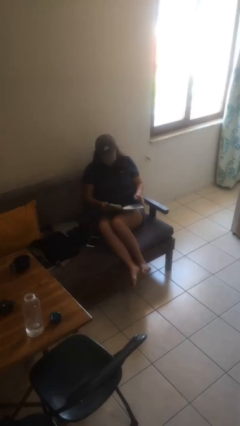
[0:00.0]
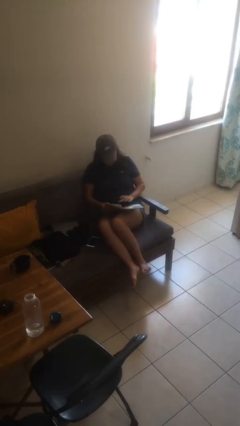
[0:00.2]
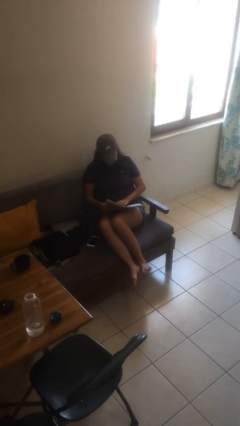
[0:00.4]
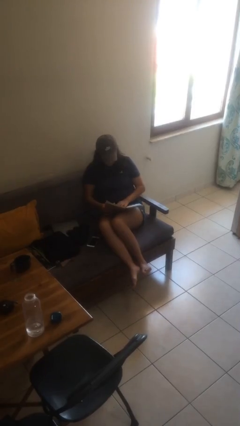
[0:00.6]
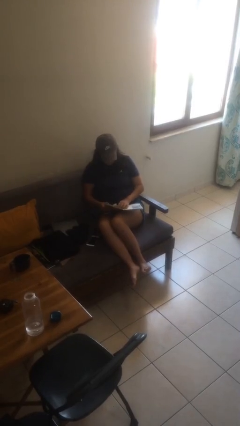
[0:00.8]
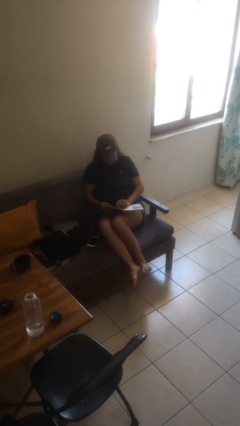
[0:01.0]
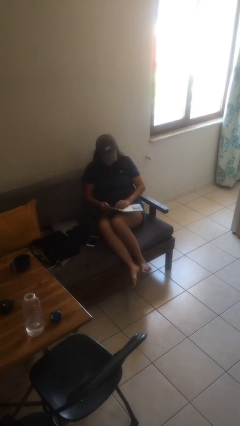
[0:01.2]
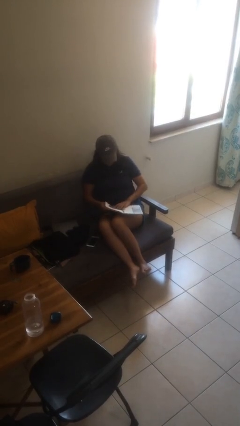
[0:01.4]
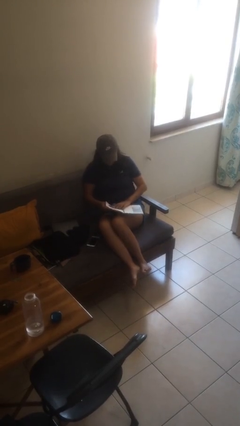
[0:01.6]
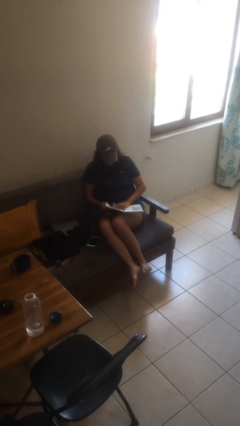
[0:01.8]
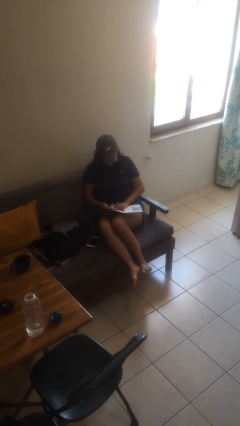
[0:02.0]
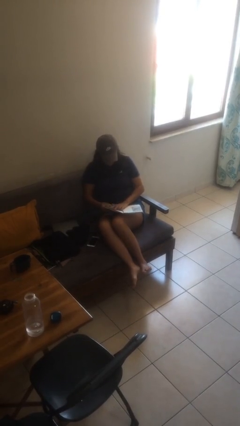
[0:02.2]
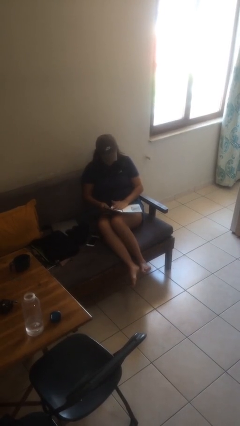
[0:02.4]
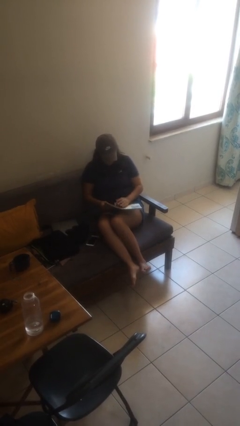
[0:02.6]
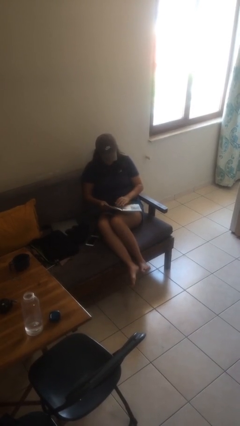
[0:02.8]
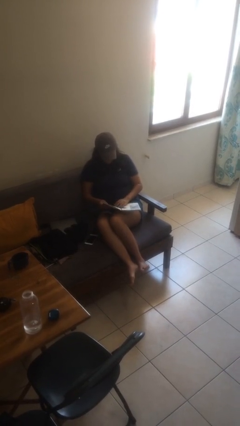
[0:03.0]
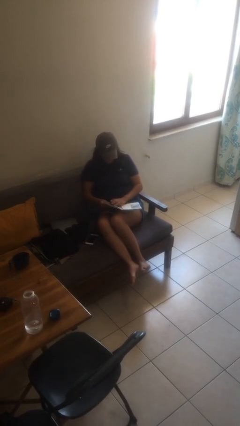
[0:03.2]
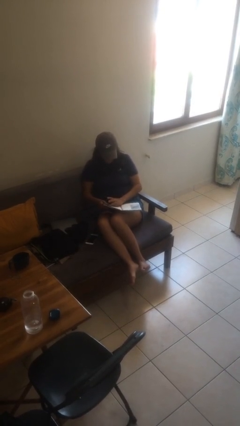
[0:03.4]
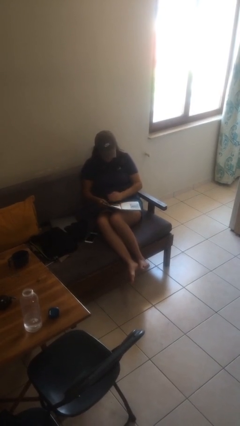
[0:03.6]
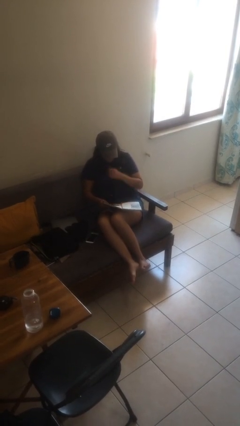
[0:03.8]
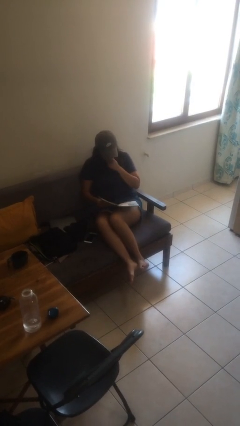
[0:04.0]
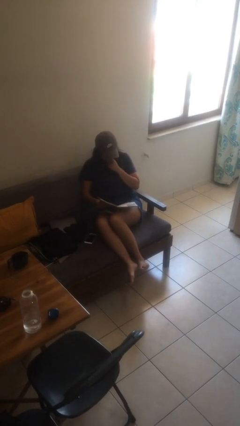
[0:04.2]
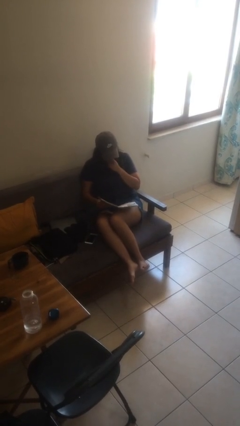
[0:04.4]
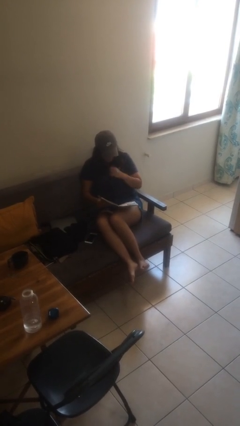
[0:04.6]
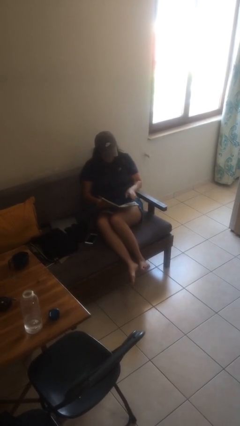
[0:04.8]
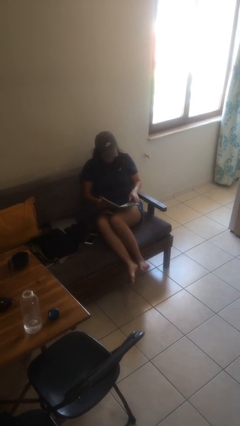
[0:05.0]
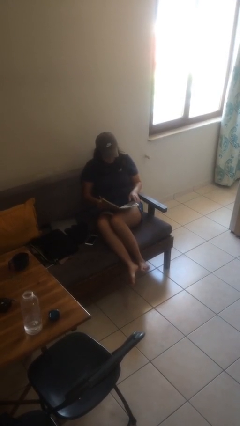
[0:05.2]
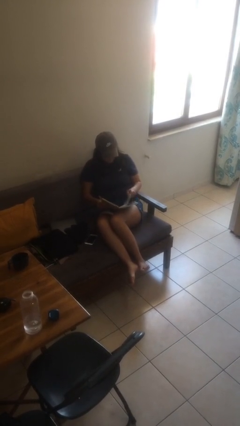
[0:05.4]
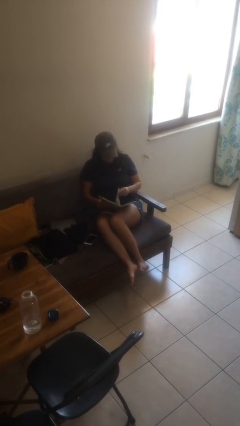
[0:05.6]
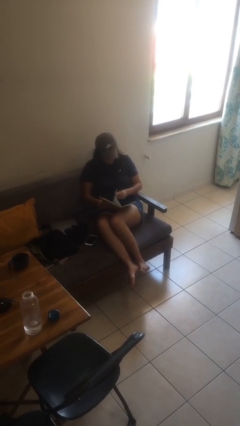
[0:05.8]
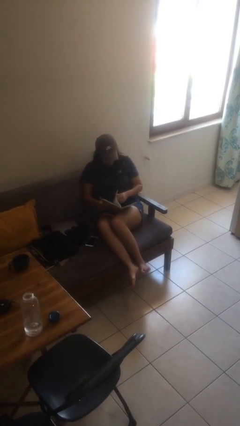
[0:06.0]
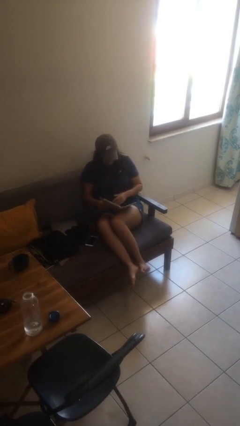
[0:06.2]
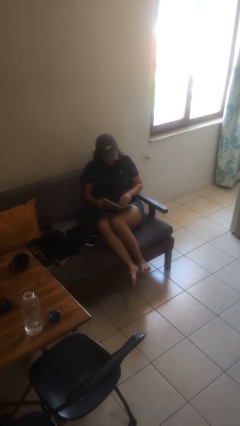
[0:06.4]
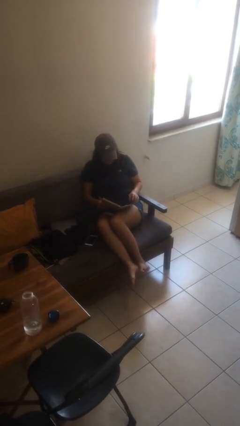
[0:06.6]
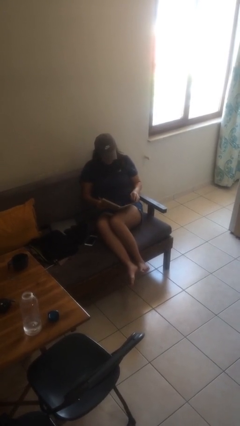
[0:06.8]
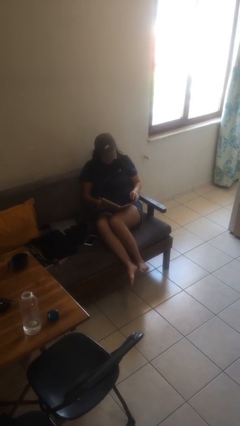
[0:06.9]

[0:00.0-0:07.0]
person reads document

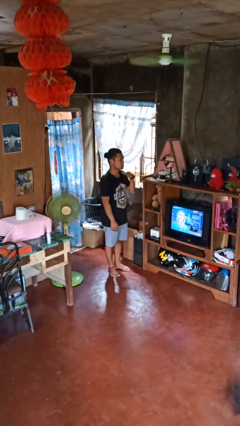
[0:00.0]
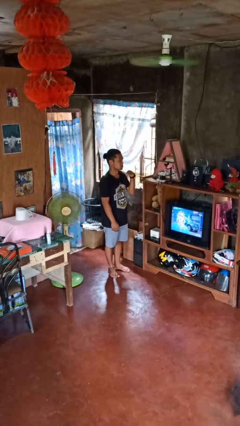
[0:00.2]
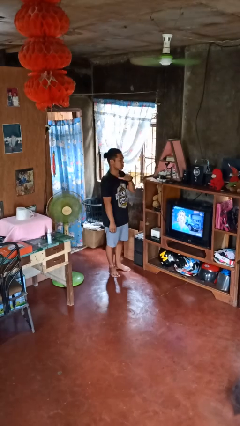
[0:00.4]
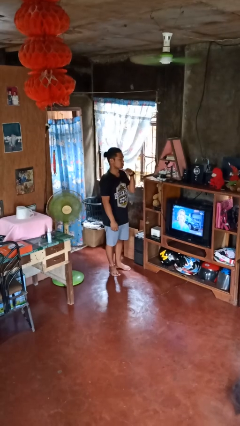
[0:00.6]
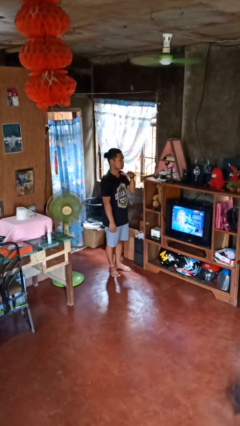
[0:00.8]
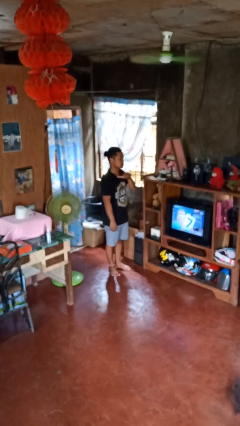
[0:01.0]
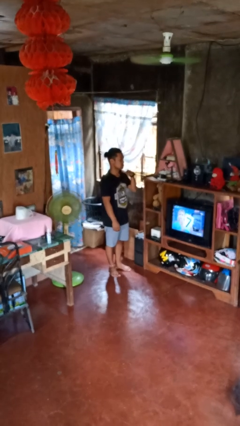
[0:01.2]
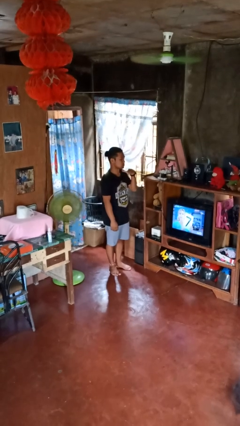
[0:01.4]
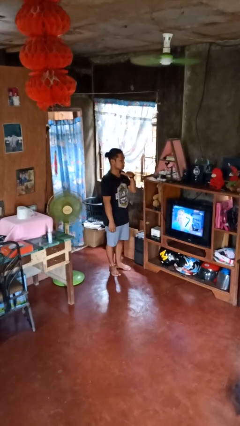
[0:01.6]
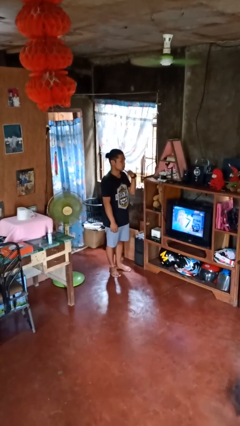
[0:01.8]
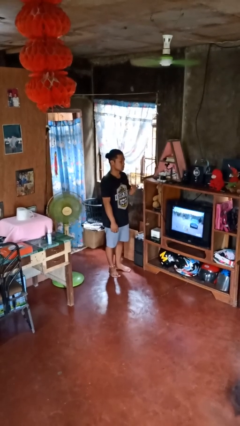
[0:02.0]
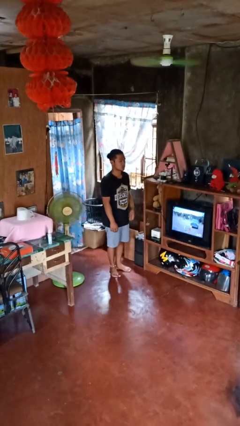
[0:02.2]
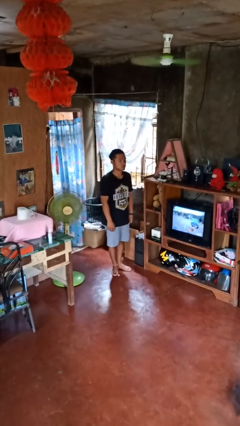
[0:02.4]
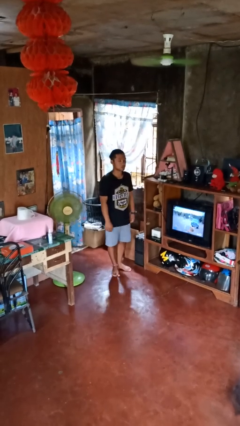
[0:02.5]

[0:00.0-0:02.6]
person gestures cut

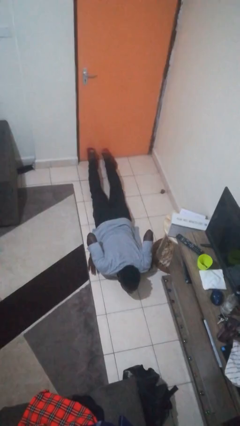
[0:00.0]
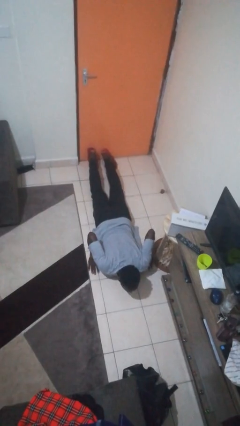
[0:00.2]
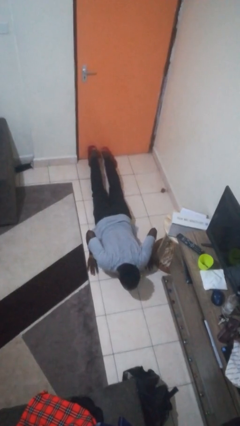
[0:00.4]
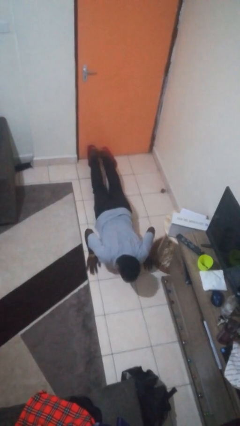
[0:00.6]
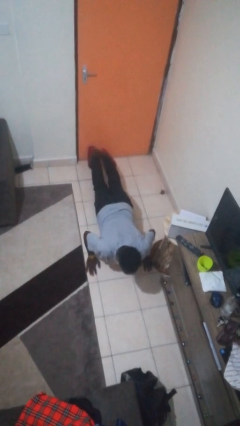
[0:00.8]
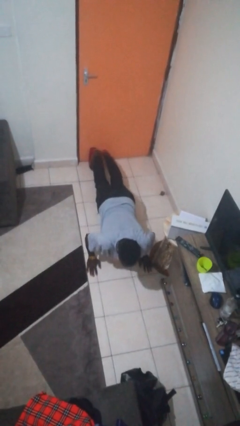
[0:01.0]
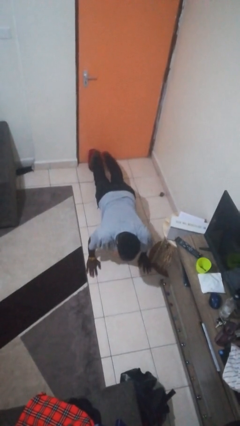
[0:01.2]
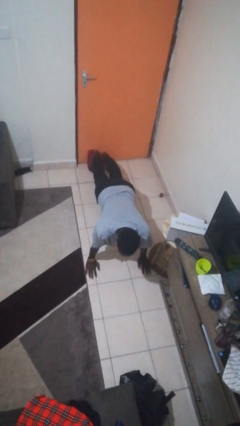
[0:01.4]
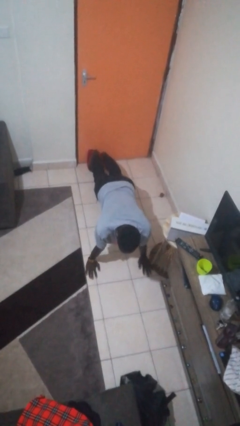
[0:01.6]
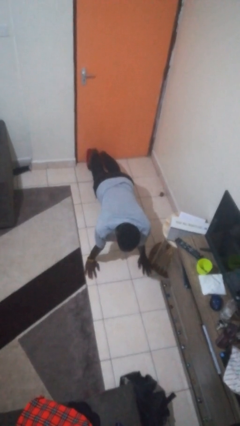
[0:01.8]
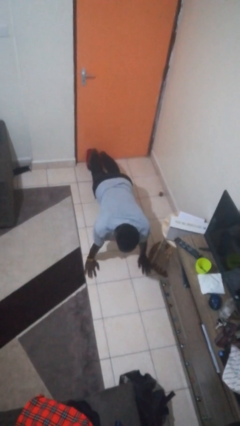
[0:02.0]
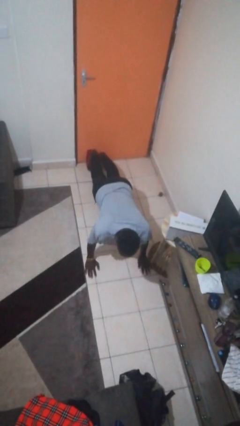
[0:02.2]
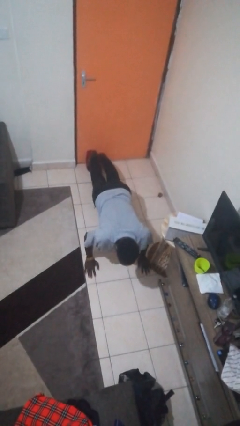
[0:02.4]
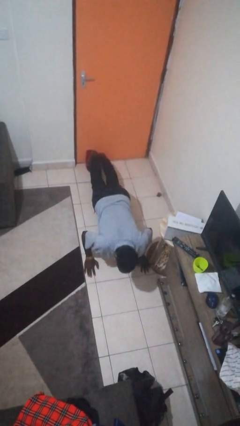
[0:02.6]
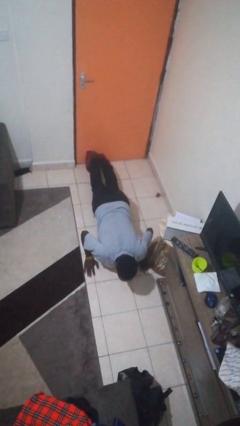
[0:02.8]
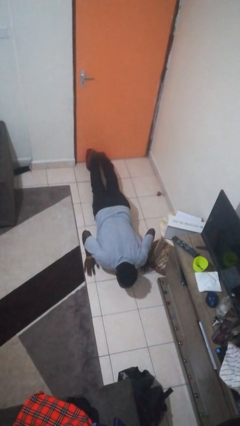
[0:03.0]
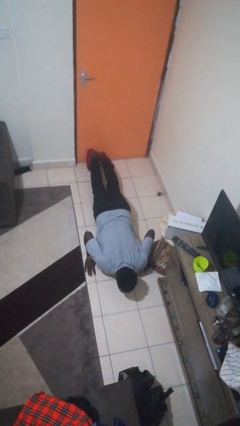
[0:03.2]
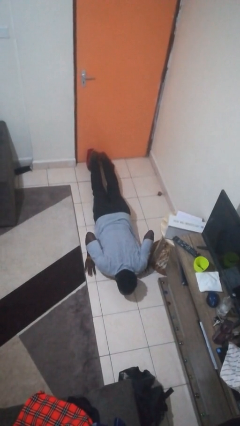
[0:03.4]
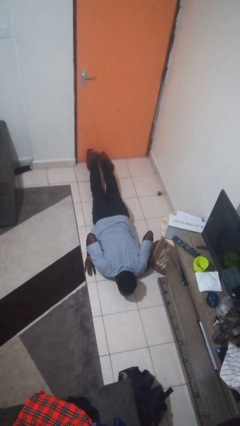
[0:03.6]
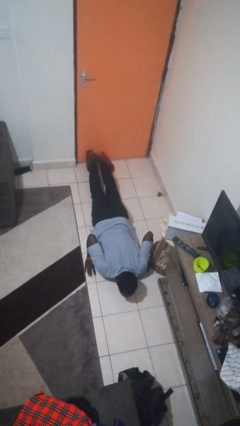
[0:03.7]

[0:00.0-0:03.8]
person exercises with pushup

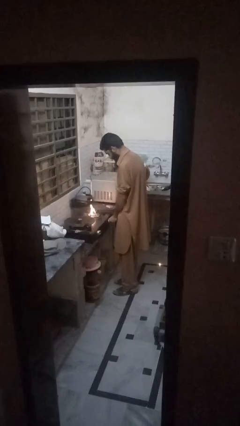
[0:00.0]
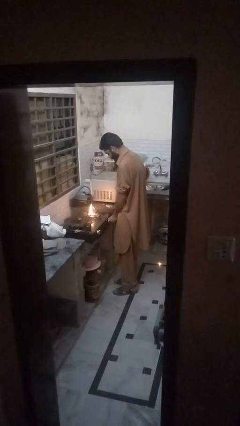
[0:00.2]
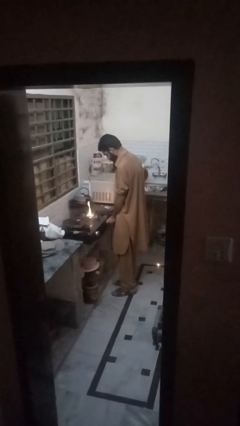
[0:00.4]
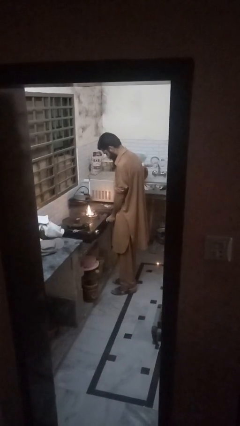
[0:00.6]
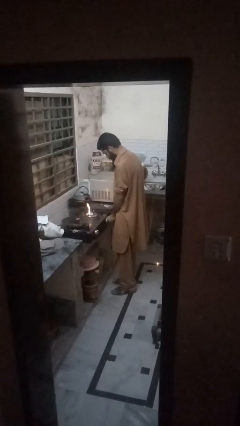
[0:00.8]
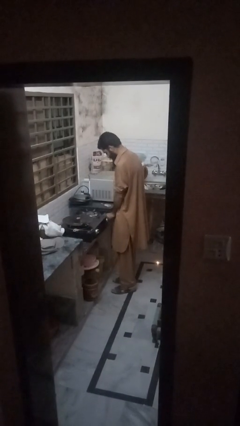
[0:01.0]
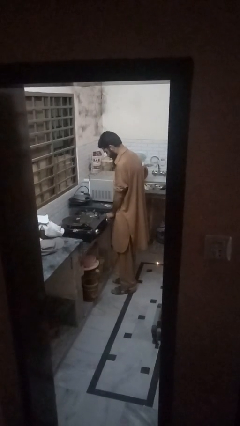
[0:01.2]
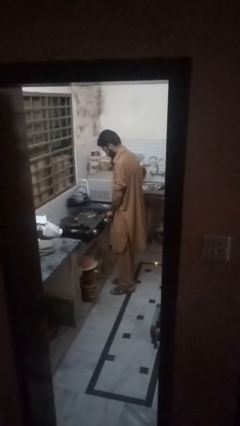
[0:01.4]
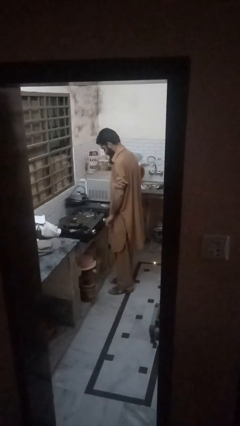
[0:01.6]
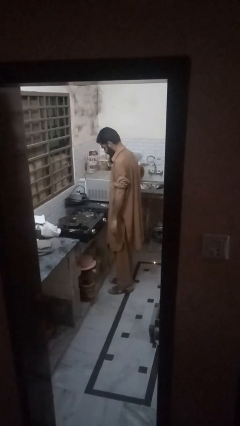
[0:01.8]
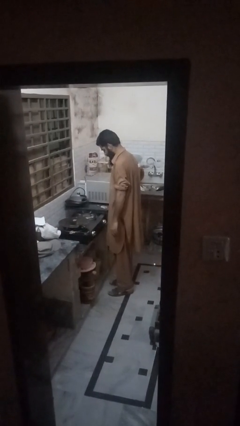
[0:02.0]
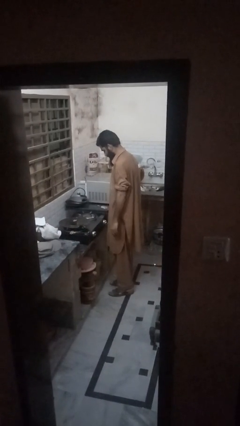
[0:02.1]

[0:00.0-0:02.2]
person turns off stovetop

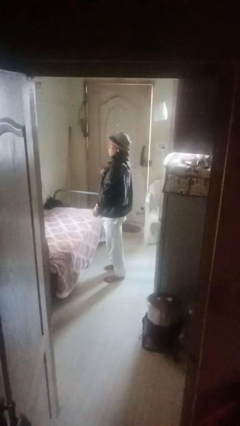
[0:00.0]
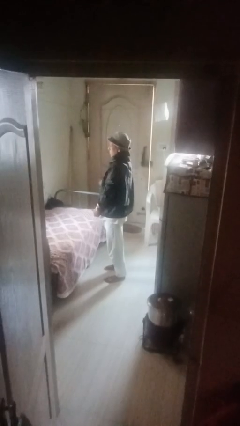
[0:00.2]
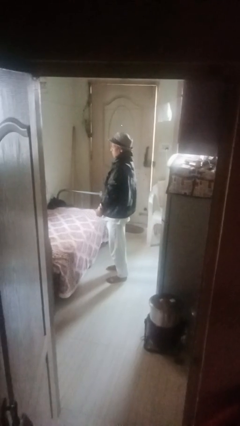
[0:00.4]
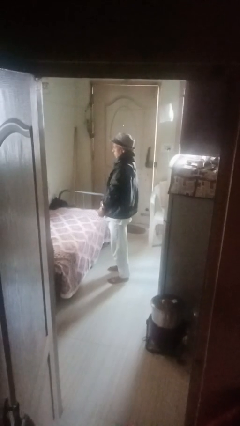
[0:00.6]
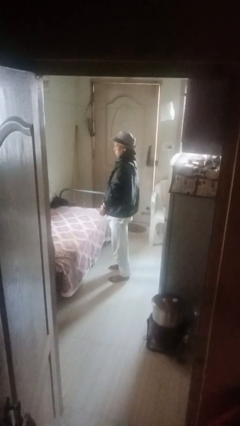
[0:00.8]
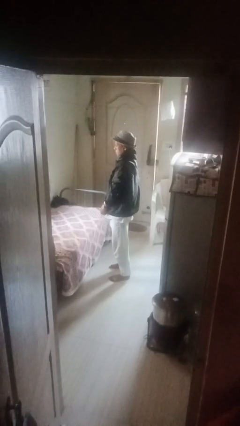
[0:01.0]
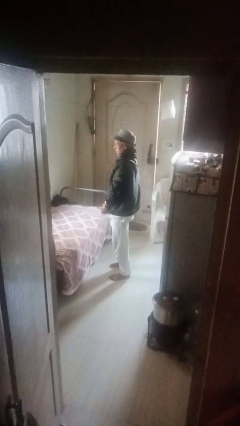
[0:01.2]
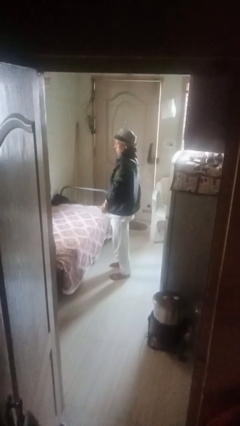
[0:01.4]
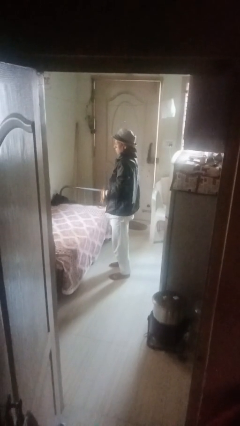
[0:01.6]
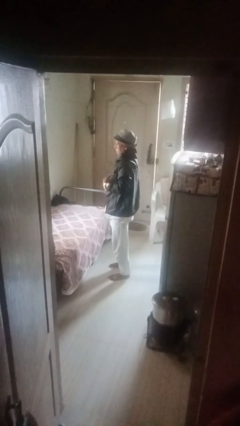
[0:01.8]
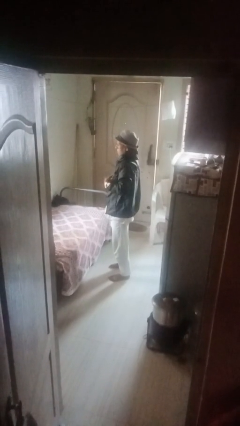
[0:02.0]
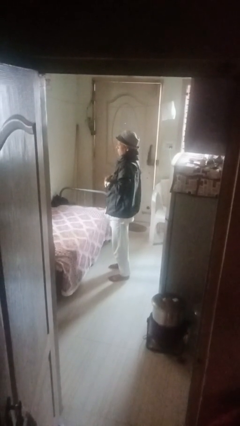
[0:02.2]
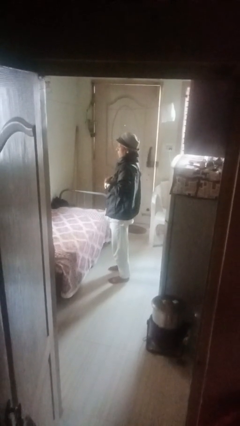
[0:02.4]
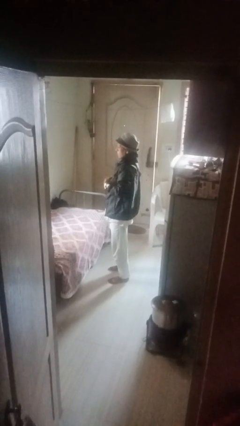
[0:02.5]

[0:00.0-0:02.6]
person unzips jacket
